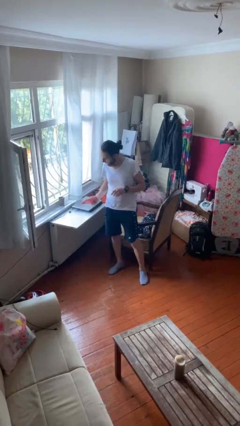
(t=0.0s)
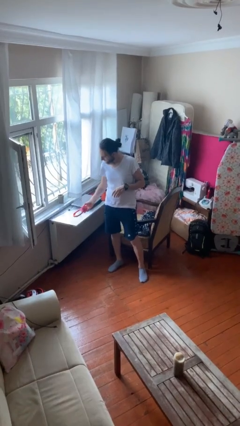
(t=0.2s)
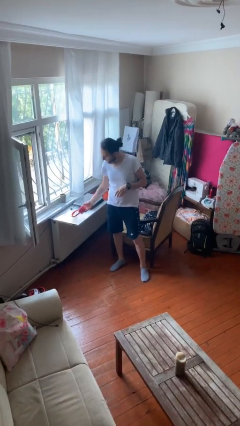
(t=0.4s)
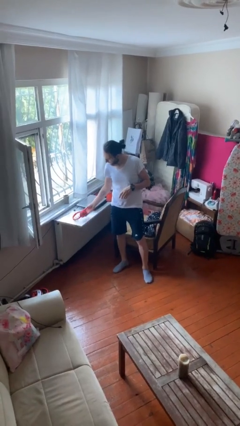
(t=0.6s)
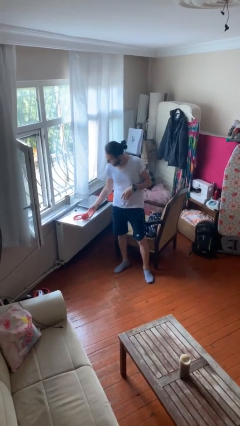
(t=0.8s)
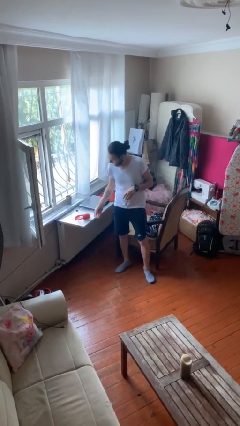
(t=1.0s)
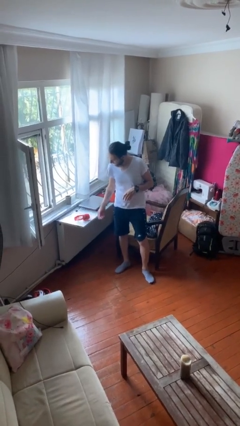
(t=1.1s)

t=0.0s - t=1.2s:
person puts down object on table

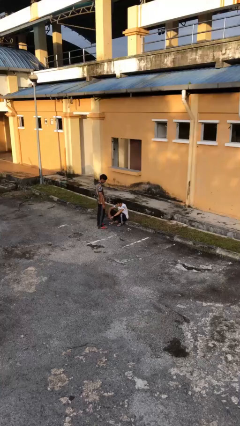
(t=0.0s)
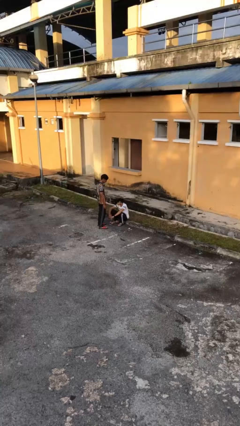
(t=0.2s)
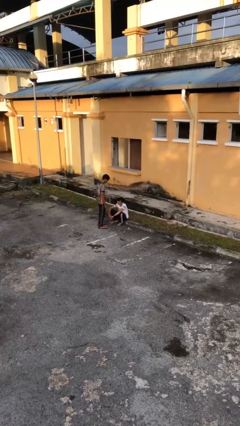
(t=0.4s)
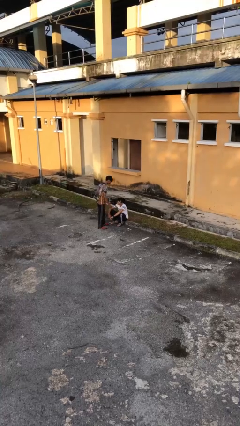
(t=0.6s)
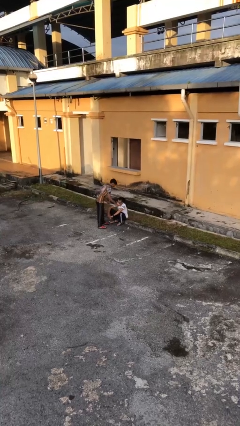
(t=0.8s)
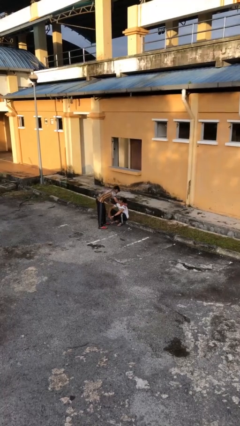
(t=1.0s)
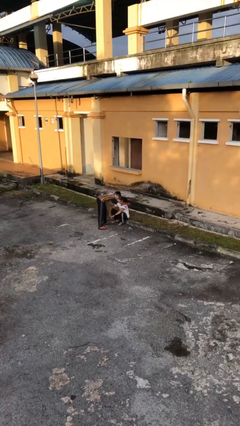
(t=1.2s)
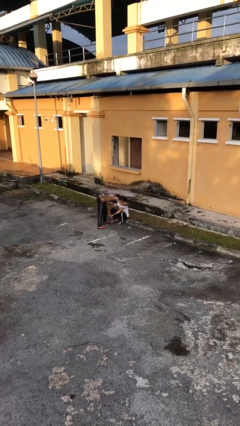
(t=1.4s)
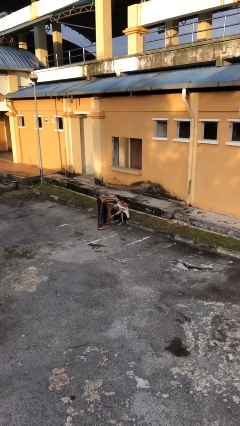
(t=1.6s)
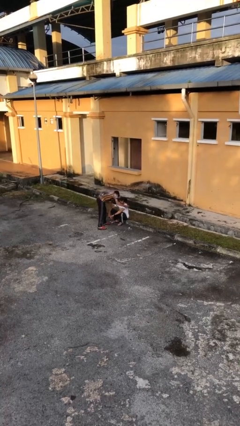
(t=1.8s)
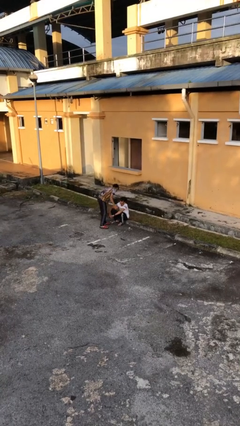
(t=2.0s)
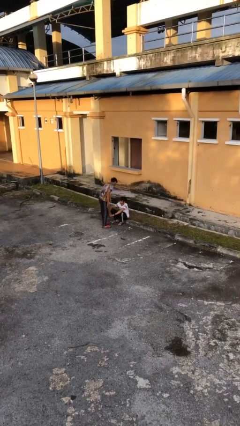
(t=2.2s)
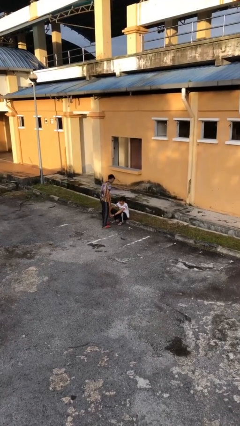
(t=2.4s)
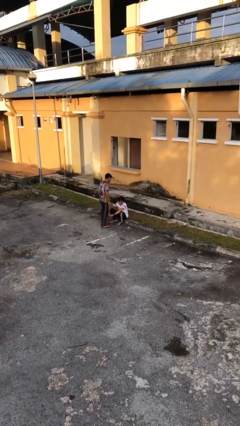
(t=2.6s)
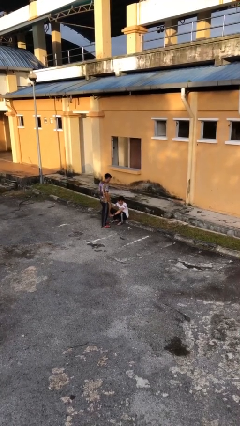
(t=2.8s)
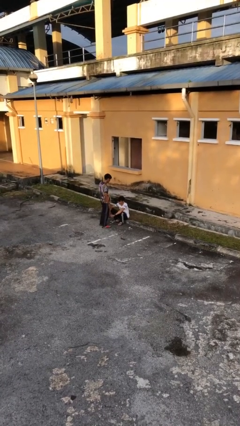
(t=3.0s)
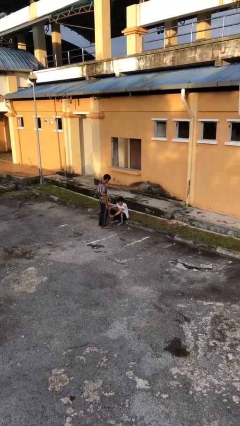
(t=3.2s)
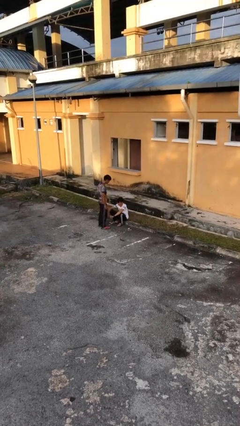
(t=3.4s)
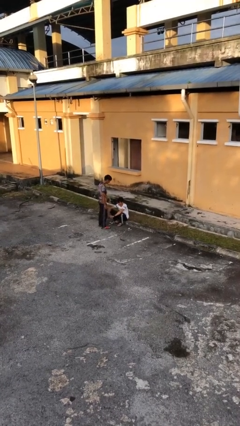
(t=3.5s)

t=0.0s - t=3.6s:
person embraces person

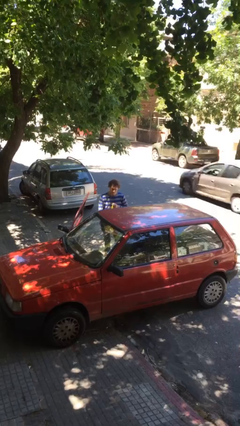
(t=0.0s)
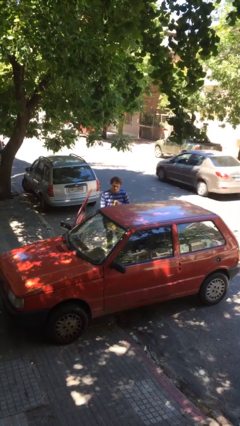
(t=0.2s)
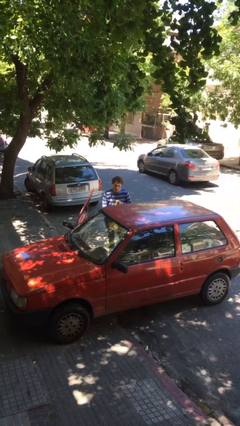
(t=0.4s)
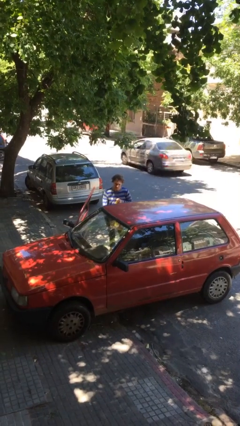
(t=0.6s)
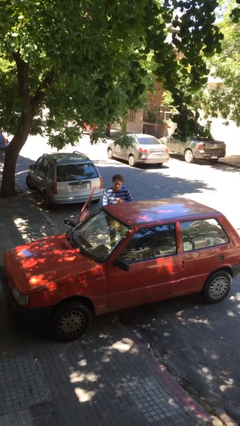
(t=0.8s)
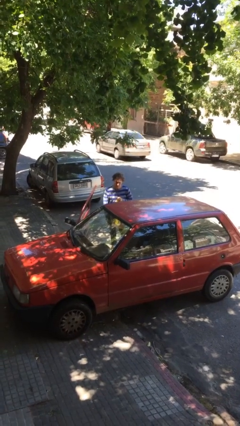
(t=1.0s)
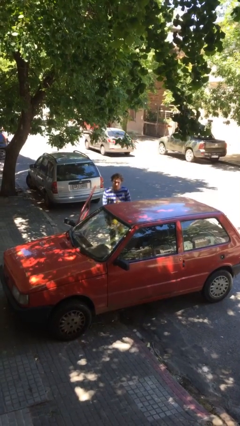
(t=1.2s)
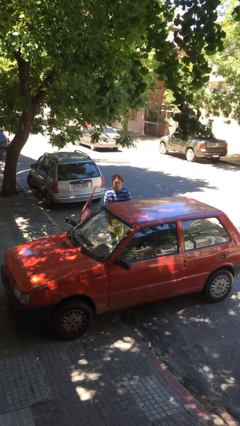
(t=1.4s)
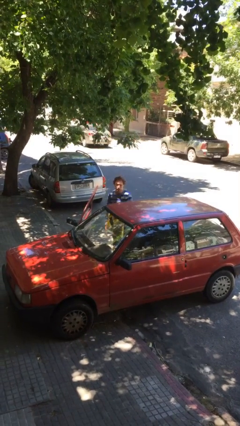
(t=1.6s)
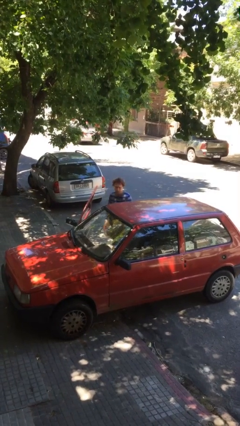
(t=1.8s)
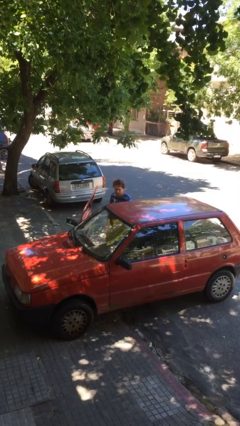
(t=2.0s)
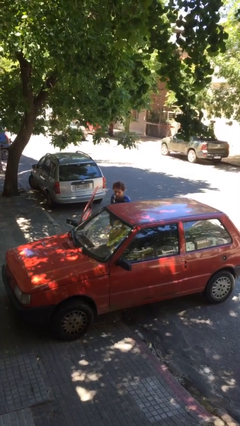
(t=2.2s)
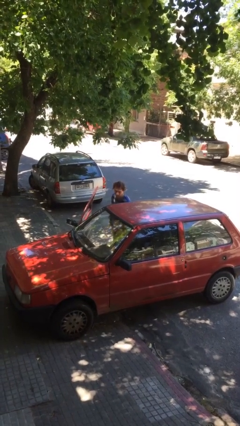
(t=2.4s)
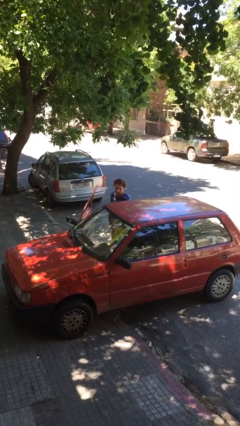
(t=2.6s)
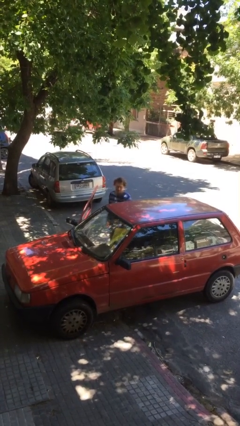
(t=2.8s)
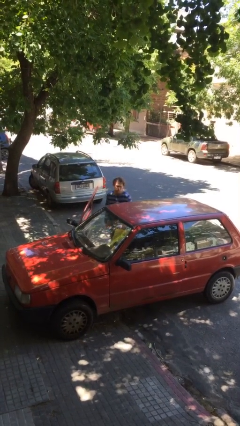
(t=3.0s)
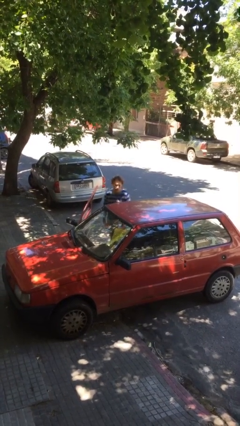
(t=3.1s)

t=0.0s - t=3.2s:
person loads car

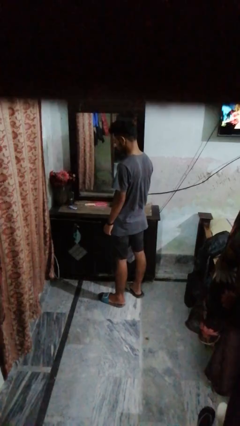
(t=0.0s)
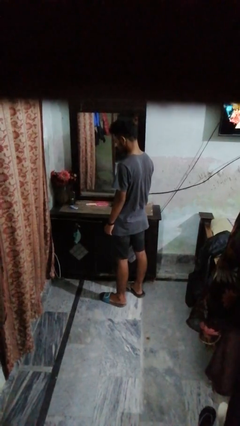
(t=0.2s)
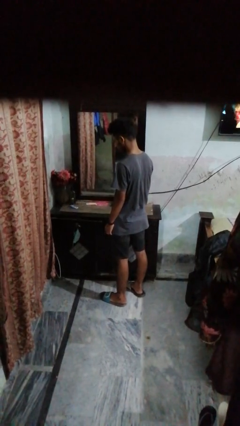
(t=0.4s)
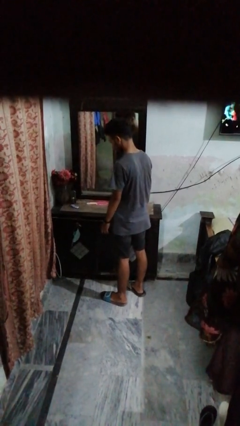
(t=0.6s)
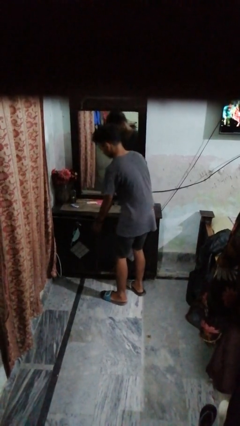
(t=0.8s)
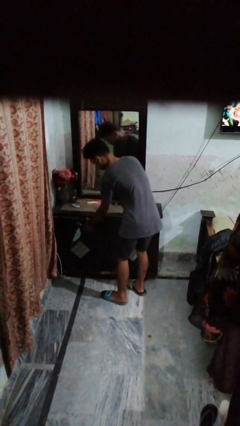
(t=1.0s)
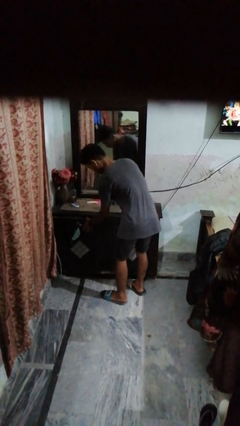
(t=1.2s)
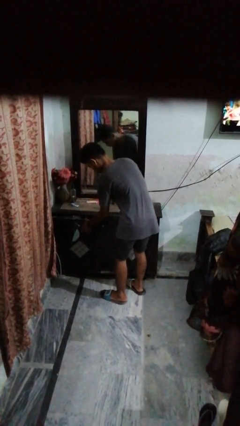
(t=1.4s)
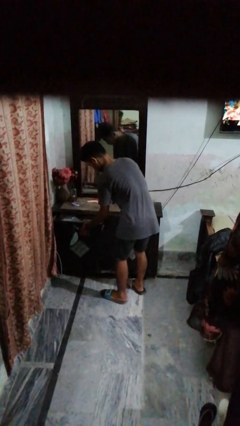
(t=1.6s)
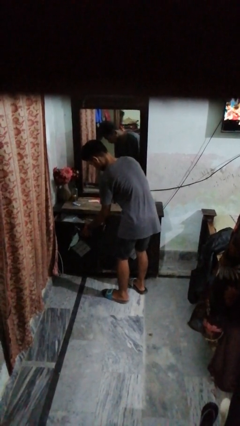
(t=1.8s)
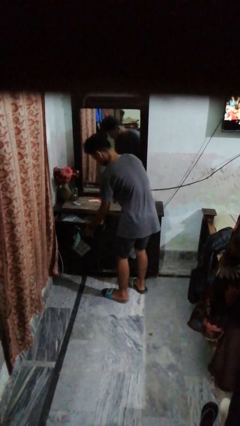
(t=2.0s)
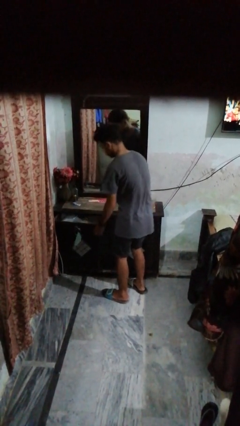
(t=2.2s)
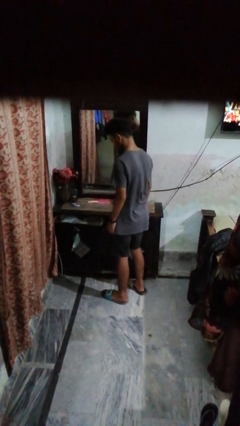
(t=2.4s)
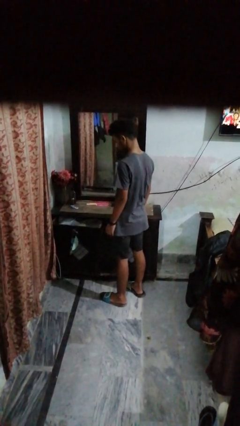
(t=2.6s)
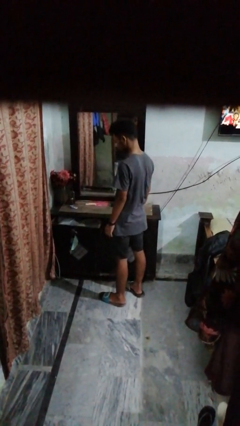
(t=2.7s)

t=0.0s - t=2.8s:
person opens dresser drawer

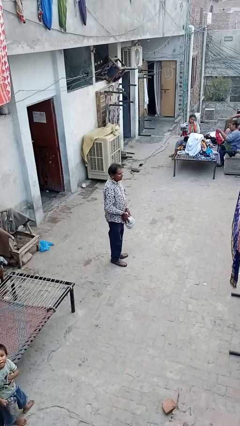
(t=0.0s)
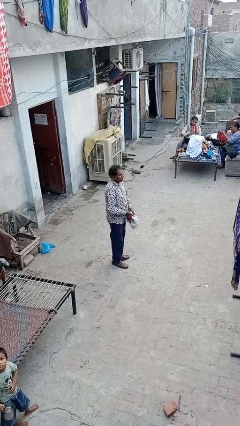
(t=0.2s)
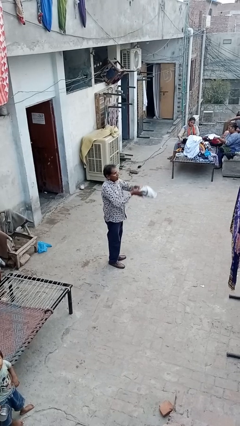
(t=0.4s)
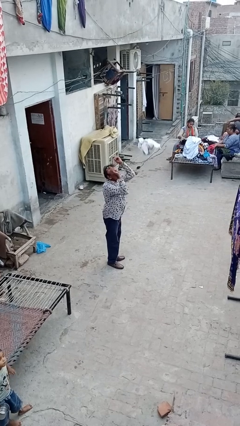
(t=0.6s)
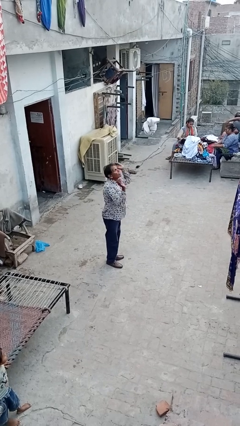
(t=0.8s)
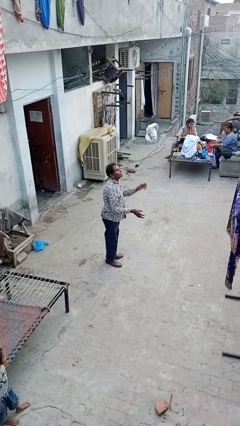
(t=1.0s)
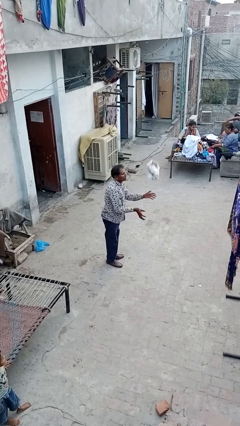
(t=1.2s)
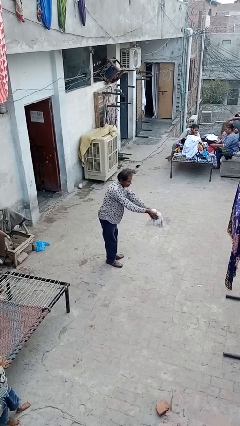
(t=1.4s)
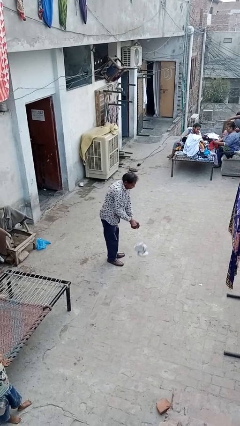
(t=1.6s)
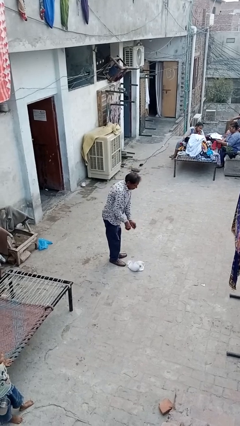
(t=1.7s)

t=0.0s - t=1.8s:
person drops object

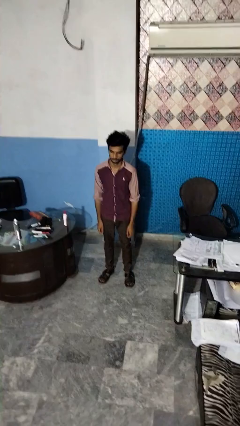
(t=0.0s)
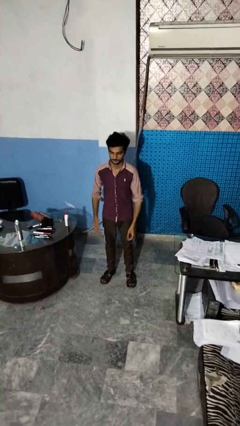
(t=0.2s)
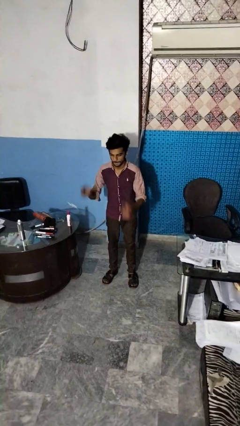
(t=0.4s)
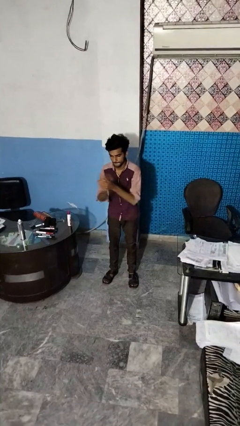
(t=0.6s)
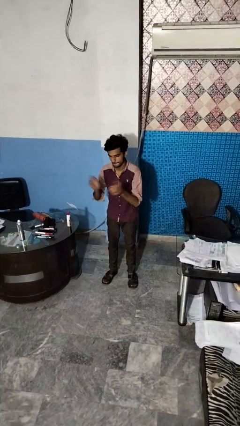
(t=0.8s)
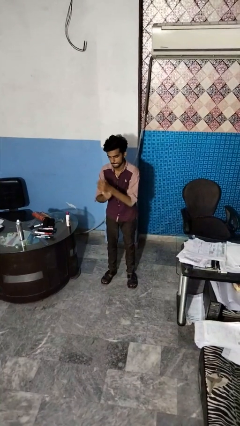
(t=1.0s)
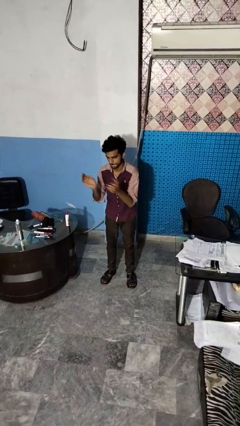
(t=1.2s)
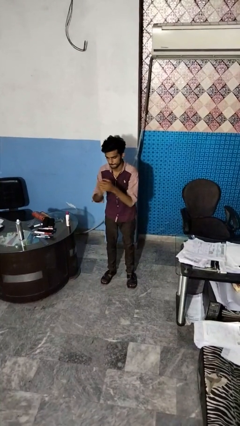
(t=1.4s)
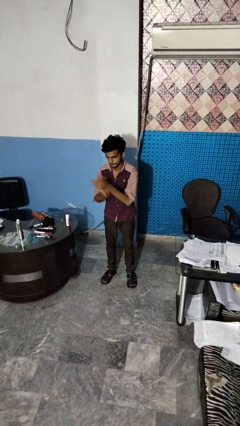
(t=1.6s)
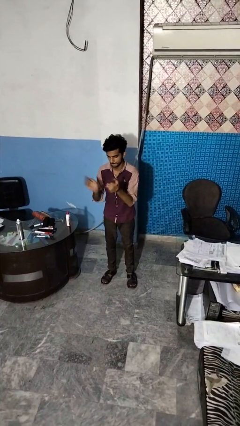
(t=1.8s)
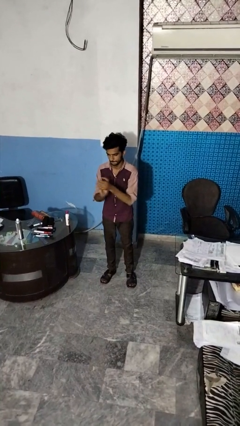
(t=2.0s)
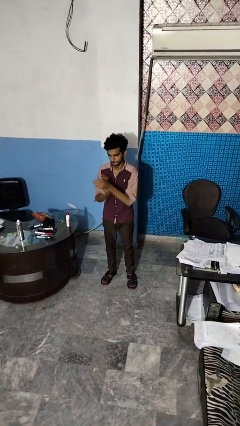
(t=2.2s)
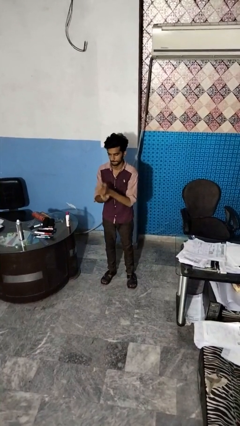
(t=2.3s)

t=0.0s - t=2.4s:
person claps hands

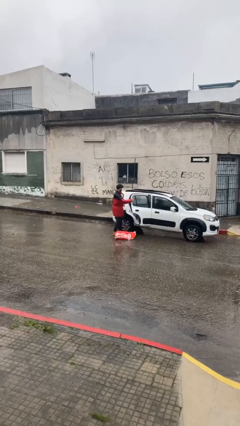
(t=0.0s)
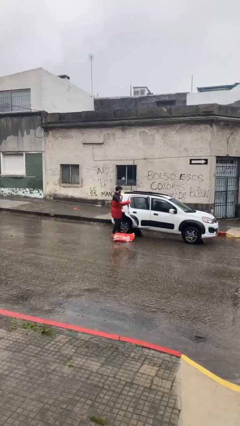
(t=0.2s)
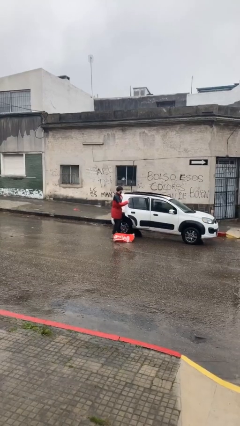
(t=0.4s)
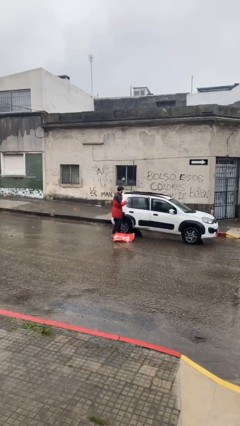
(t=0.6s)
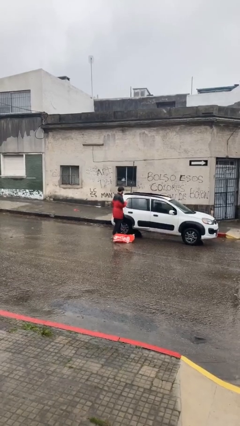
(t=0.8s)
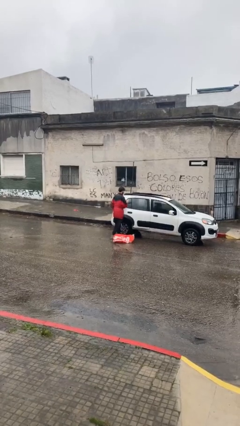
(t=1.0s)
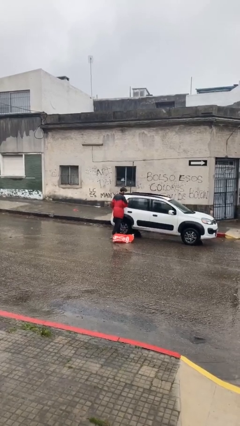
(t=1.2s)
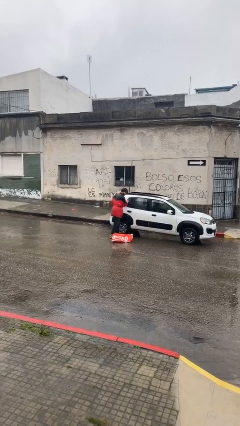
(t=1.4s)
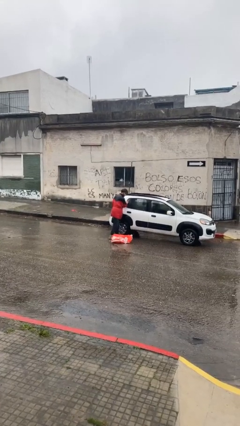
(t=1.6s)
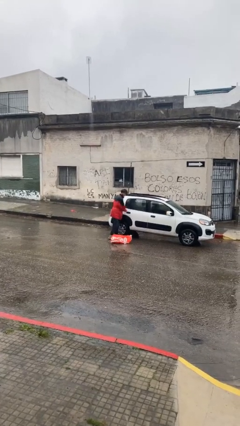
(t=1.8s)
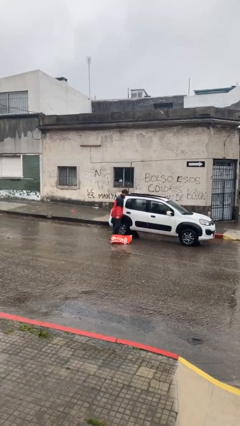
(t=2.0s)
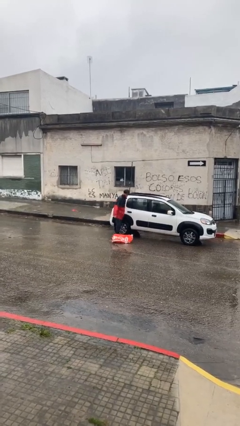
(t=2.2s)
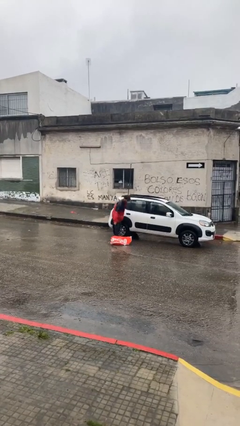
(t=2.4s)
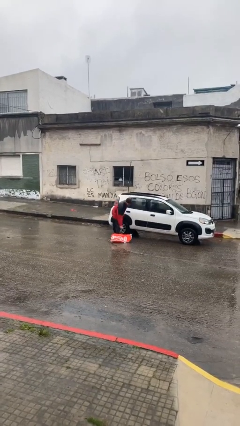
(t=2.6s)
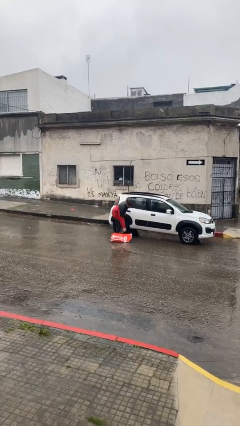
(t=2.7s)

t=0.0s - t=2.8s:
person closes car door
